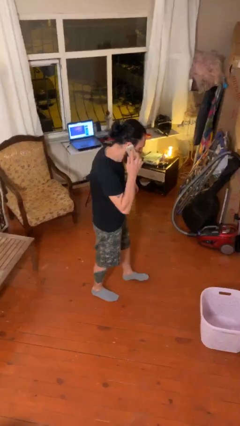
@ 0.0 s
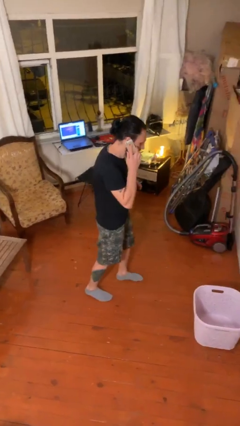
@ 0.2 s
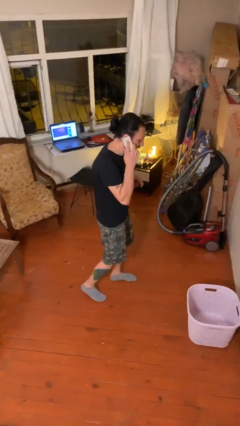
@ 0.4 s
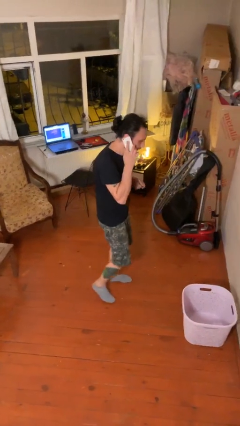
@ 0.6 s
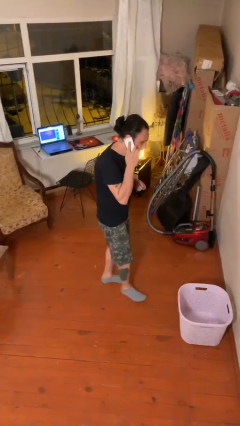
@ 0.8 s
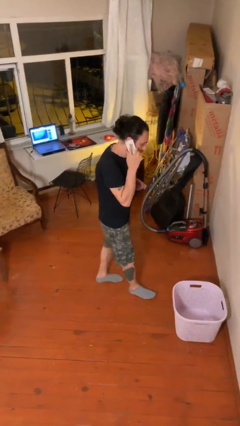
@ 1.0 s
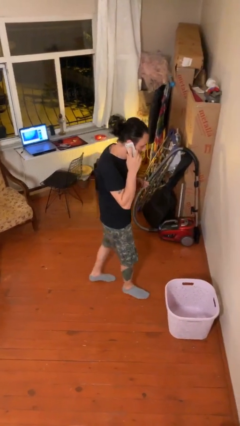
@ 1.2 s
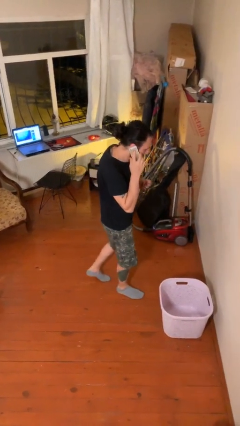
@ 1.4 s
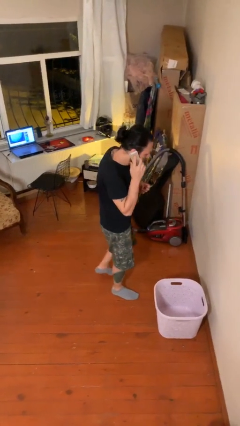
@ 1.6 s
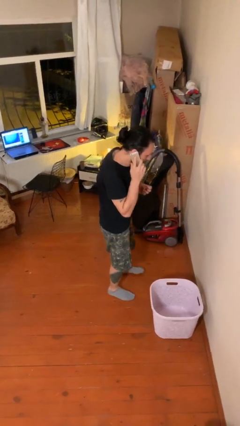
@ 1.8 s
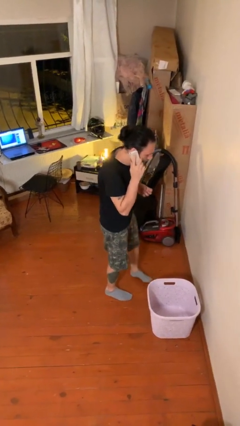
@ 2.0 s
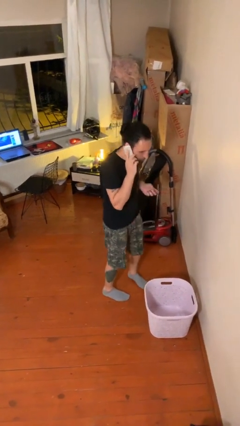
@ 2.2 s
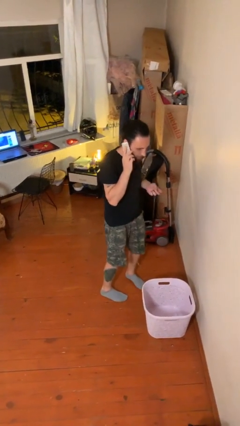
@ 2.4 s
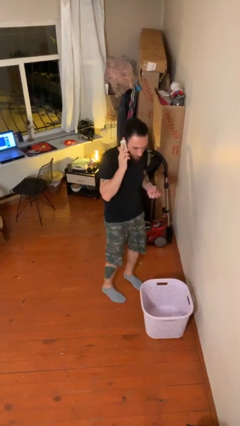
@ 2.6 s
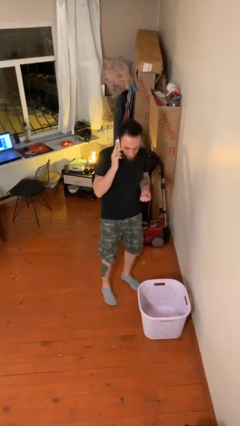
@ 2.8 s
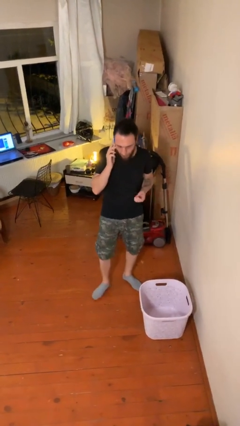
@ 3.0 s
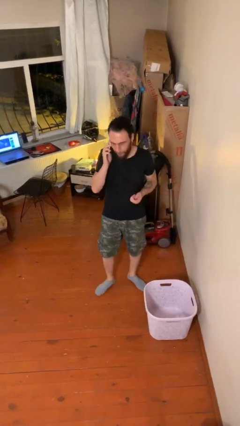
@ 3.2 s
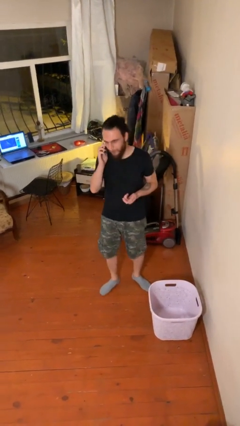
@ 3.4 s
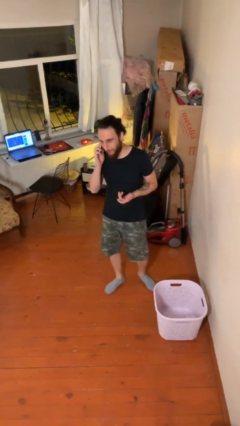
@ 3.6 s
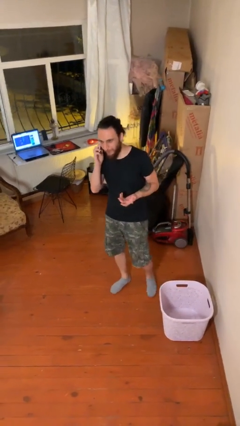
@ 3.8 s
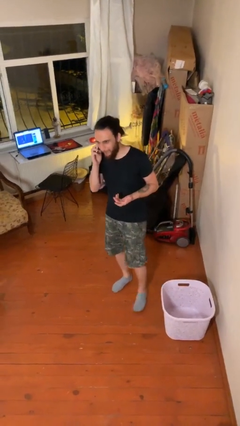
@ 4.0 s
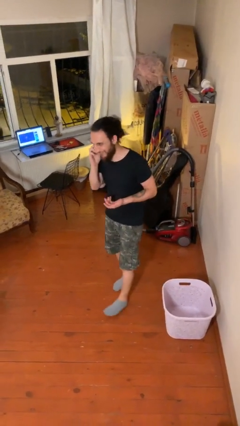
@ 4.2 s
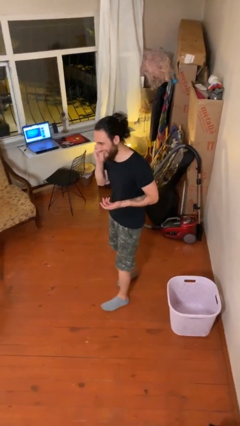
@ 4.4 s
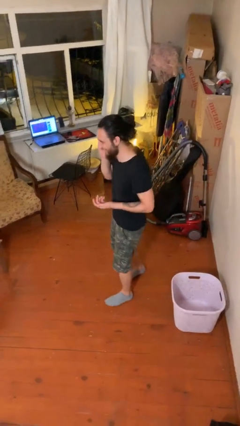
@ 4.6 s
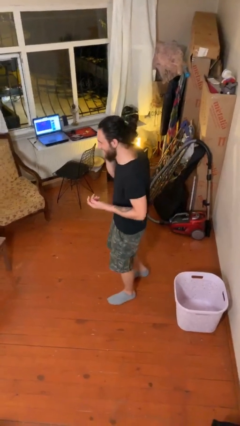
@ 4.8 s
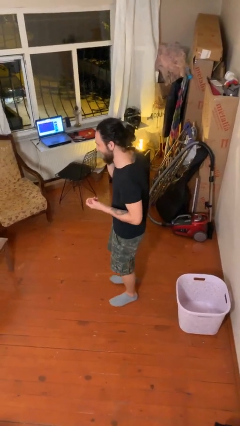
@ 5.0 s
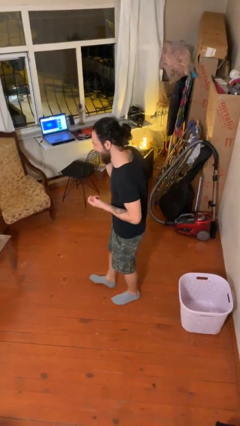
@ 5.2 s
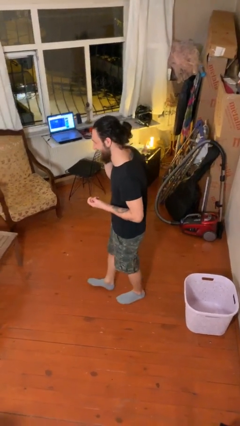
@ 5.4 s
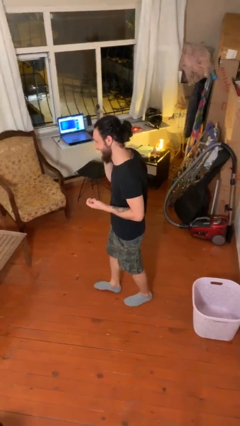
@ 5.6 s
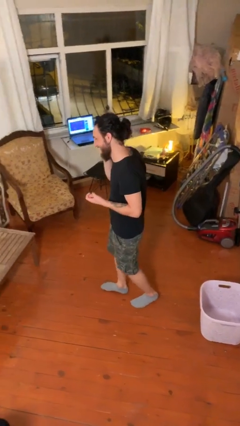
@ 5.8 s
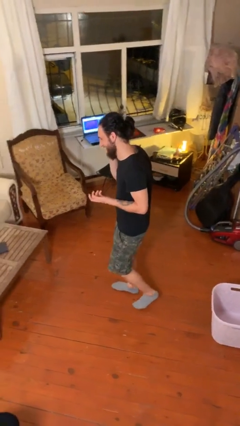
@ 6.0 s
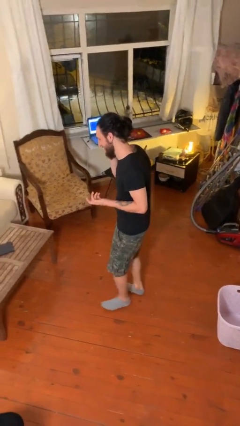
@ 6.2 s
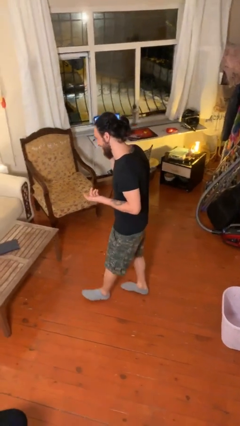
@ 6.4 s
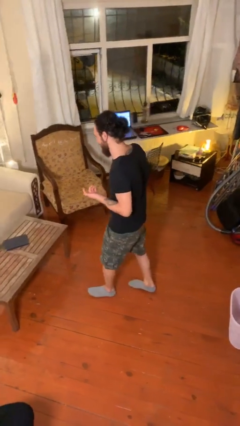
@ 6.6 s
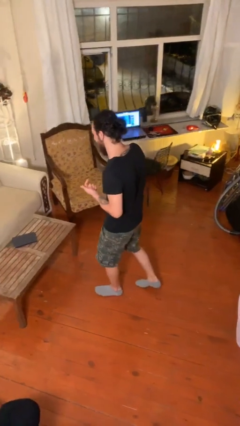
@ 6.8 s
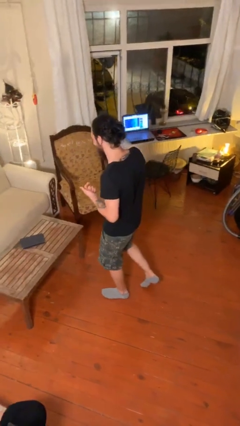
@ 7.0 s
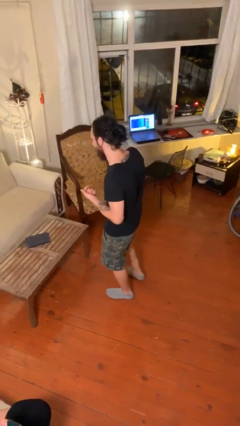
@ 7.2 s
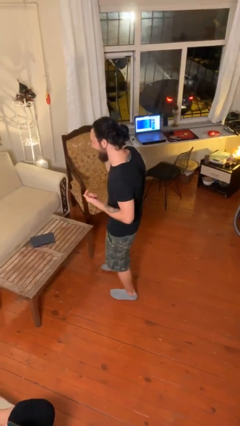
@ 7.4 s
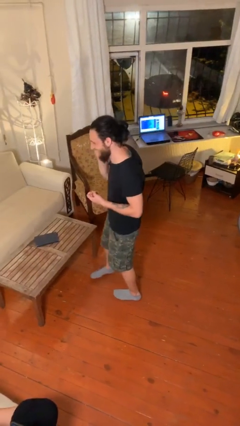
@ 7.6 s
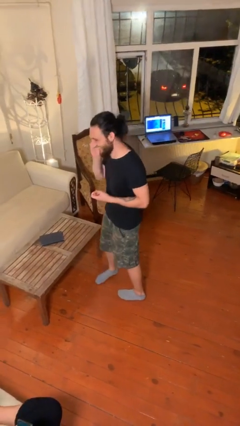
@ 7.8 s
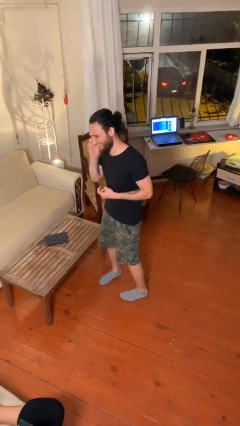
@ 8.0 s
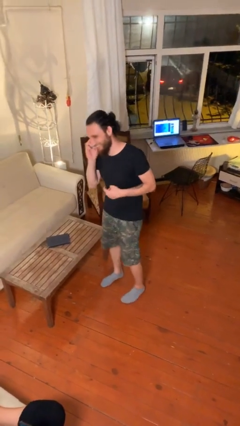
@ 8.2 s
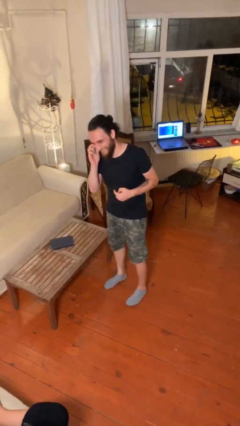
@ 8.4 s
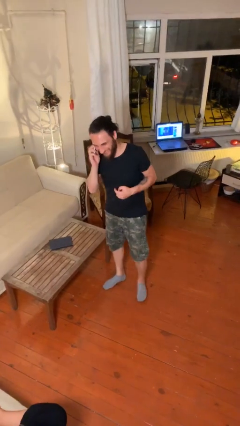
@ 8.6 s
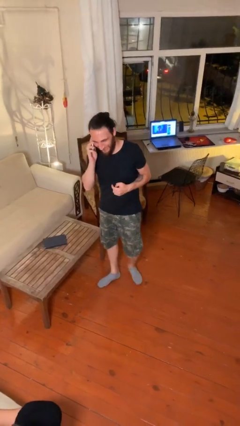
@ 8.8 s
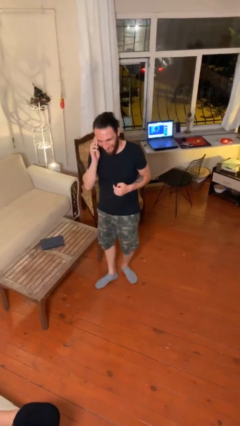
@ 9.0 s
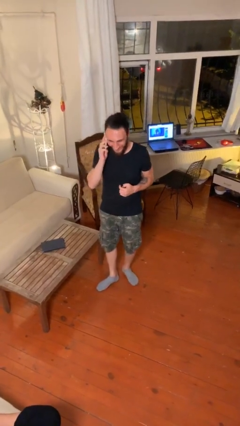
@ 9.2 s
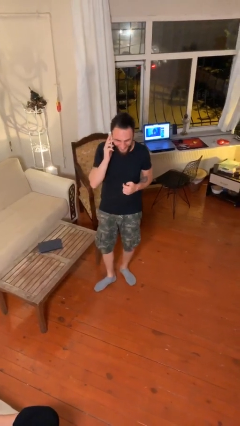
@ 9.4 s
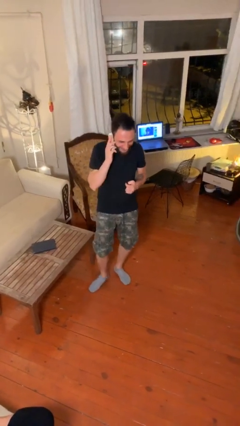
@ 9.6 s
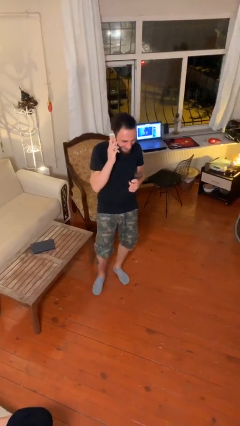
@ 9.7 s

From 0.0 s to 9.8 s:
person talks on phone

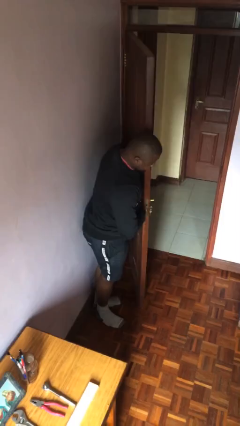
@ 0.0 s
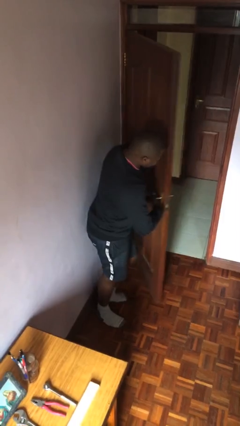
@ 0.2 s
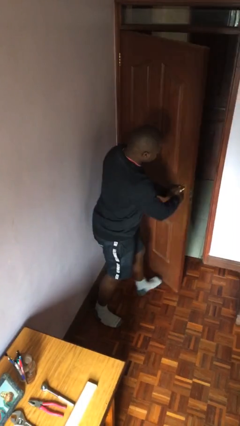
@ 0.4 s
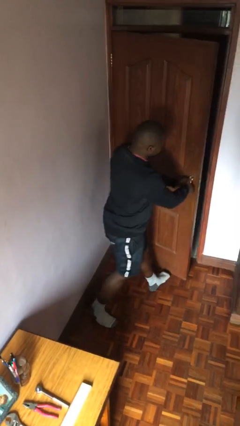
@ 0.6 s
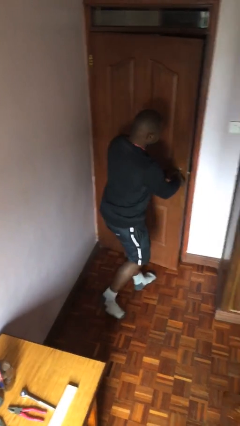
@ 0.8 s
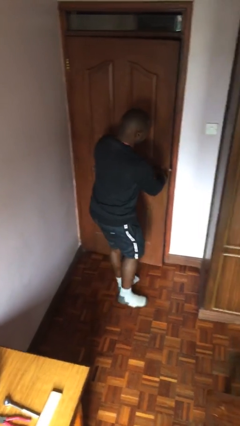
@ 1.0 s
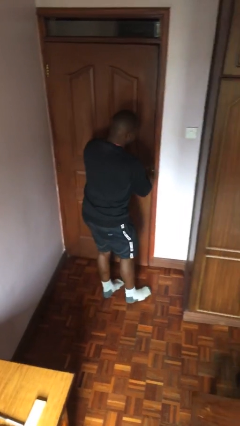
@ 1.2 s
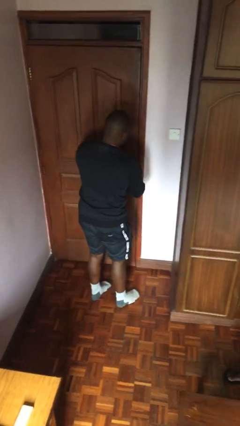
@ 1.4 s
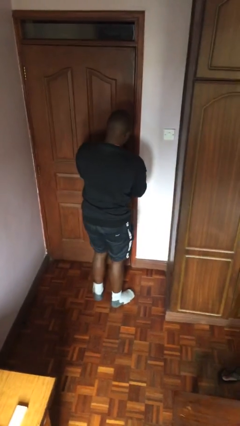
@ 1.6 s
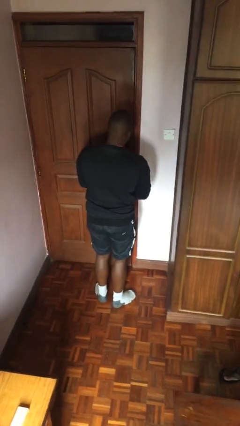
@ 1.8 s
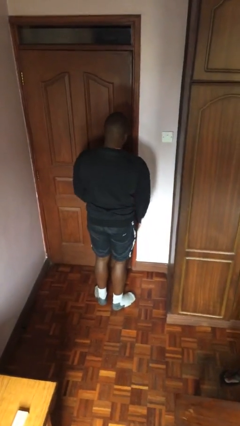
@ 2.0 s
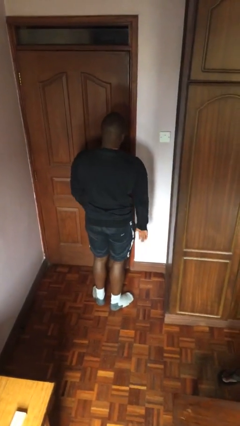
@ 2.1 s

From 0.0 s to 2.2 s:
person closes facility door

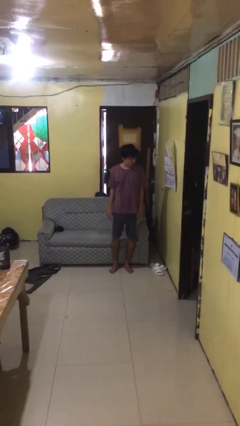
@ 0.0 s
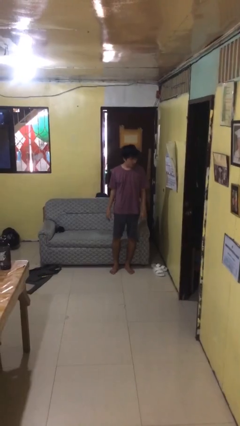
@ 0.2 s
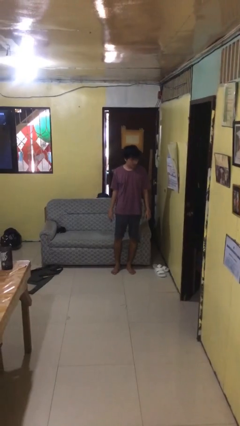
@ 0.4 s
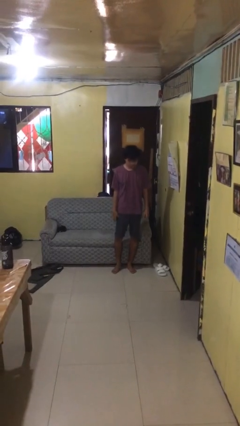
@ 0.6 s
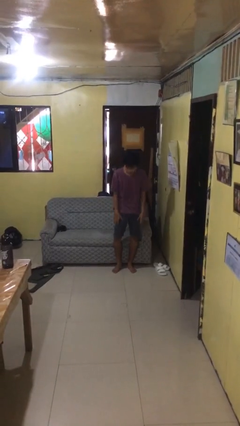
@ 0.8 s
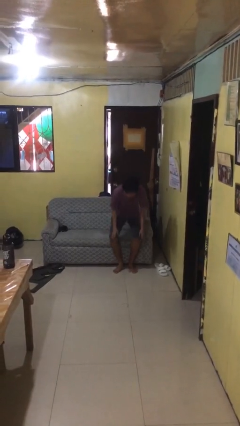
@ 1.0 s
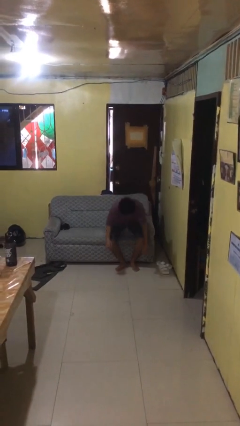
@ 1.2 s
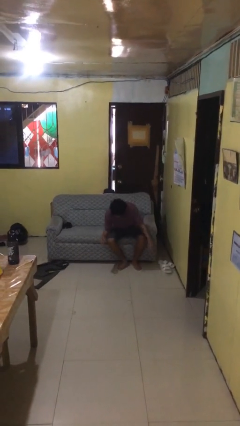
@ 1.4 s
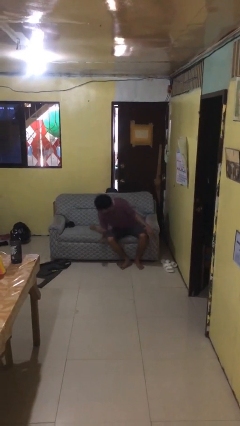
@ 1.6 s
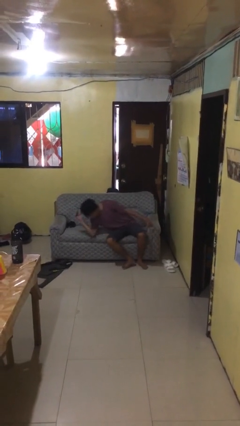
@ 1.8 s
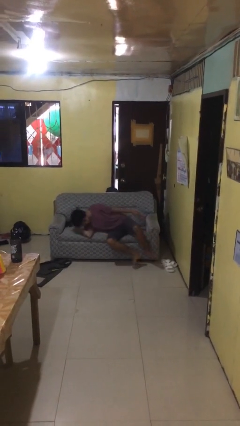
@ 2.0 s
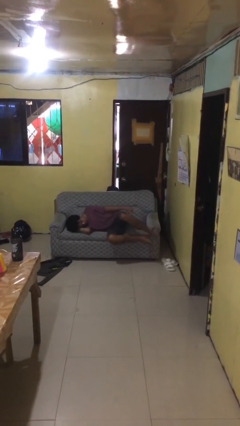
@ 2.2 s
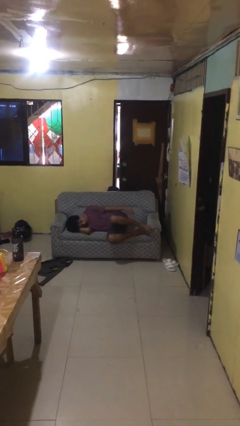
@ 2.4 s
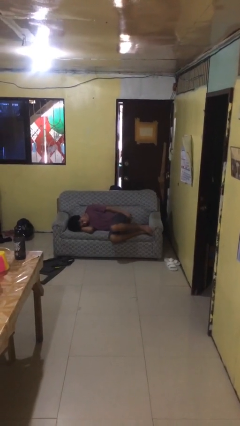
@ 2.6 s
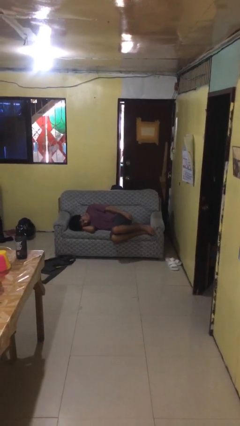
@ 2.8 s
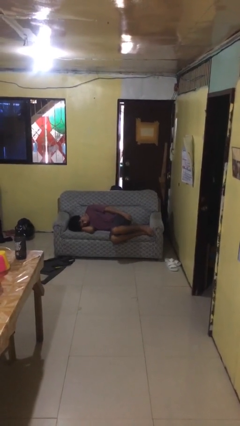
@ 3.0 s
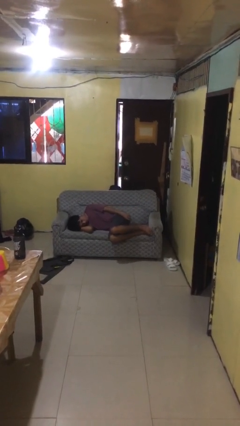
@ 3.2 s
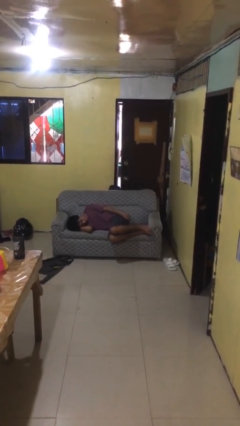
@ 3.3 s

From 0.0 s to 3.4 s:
person lies down on couch

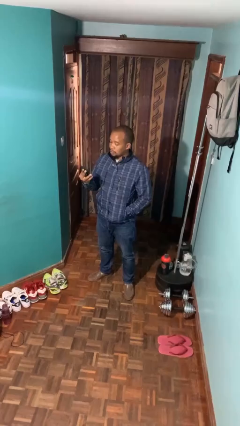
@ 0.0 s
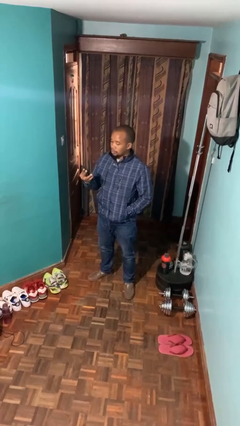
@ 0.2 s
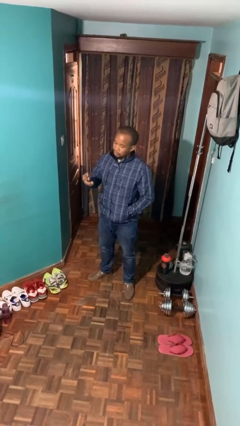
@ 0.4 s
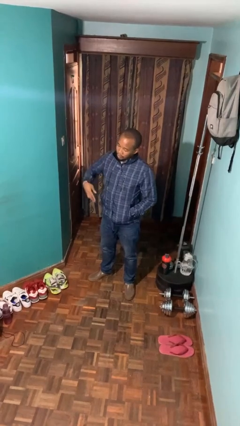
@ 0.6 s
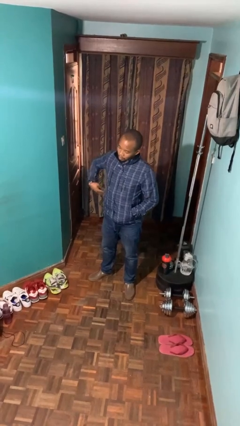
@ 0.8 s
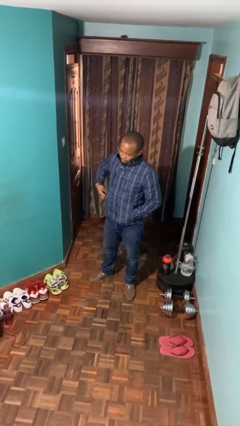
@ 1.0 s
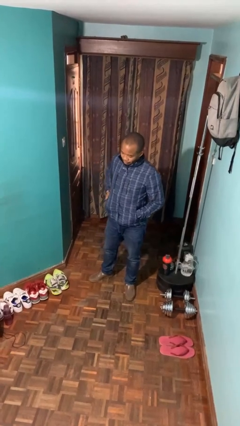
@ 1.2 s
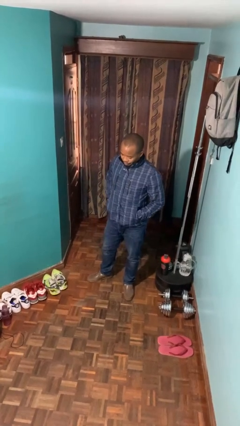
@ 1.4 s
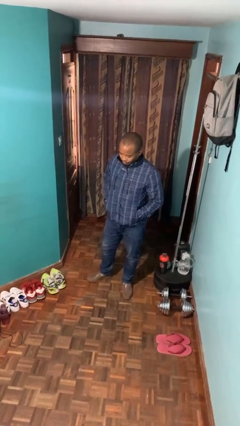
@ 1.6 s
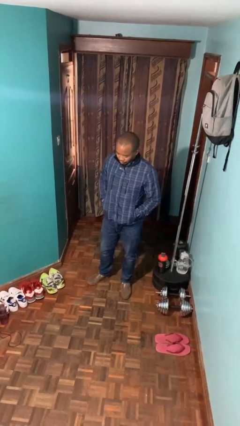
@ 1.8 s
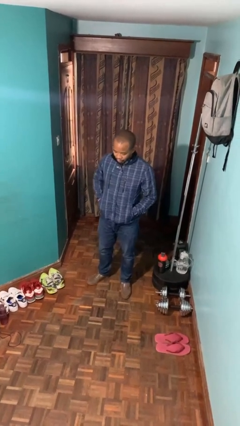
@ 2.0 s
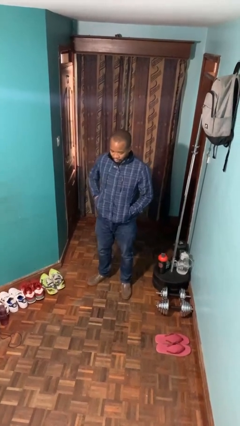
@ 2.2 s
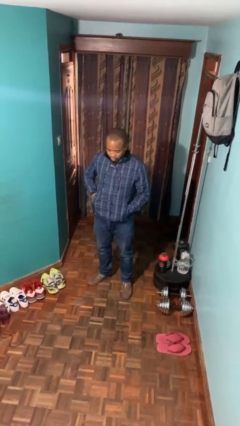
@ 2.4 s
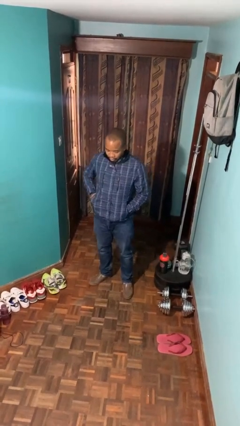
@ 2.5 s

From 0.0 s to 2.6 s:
person puts phone into pocket
